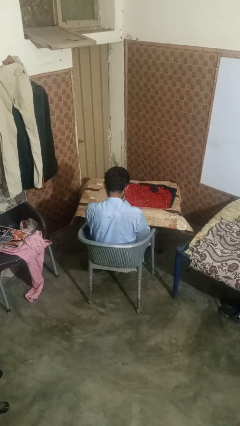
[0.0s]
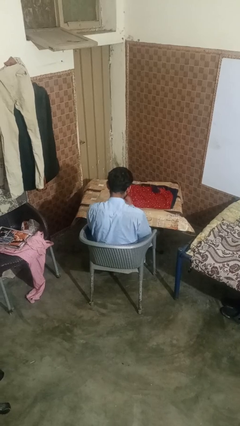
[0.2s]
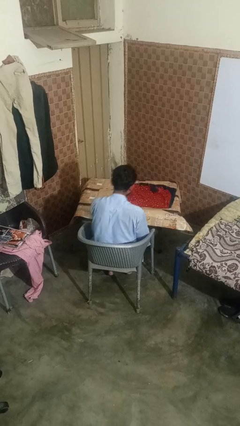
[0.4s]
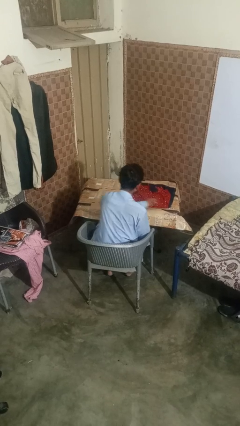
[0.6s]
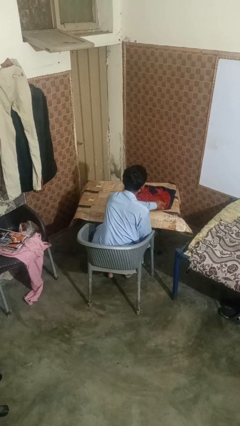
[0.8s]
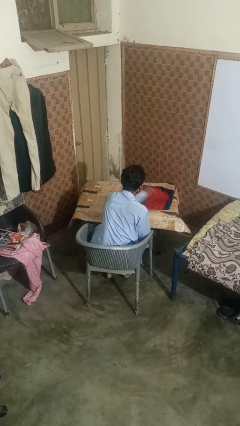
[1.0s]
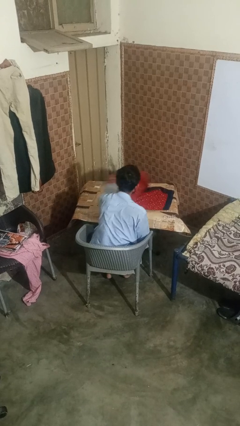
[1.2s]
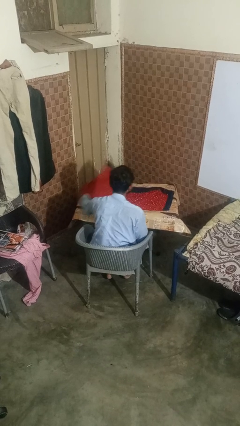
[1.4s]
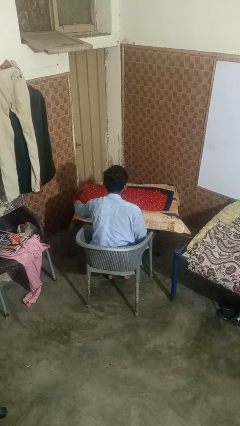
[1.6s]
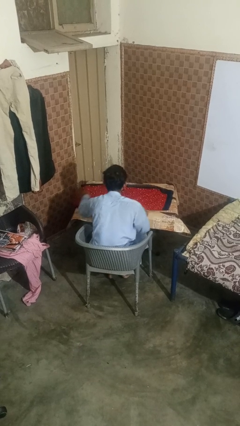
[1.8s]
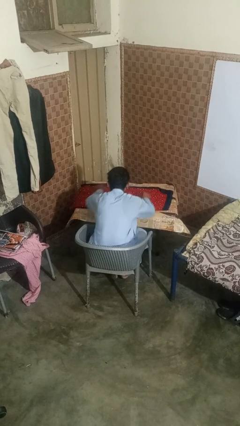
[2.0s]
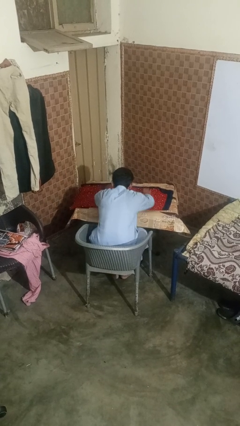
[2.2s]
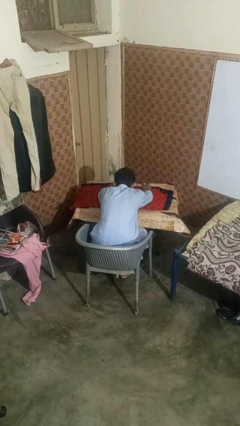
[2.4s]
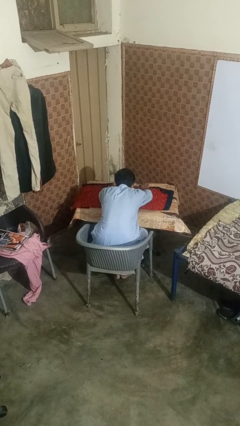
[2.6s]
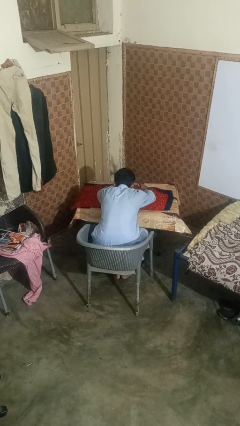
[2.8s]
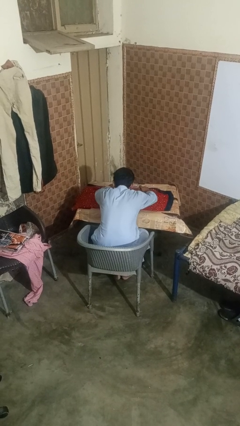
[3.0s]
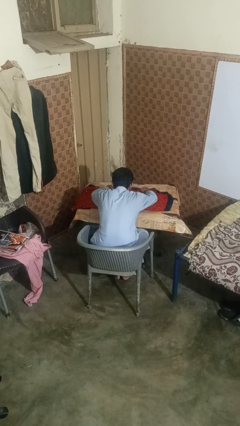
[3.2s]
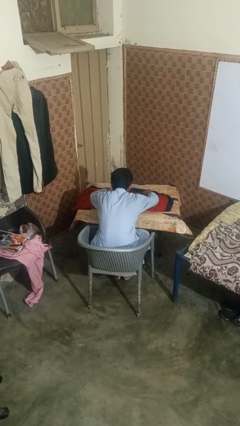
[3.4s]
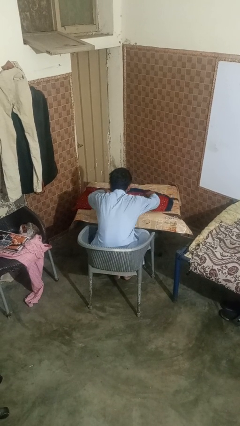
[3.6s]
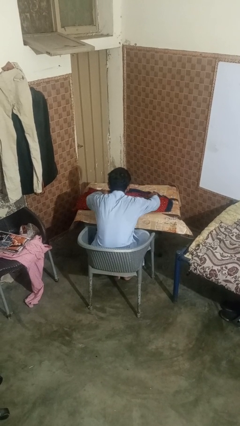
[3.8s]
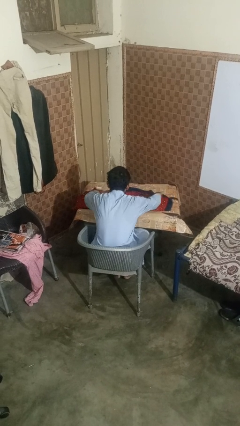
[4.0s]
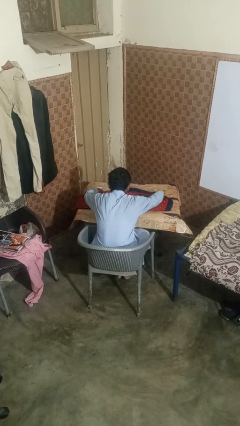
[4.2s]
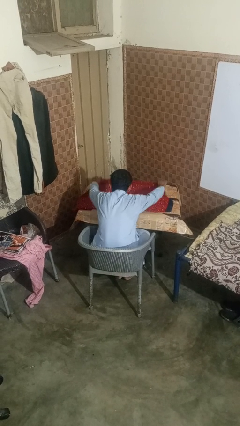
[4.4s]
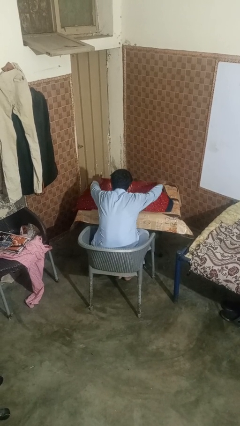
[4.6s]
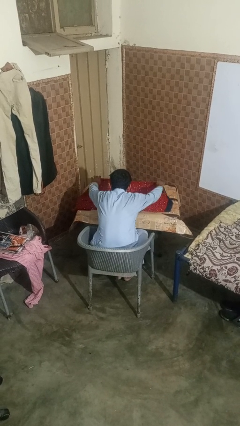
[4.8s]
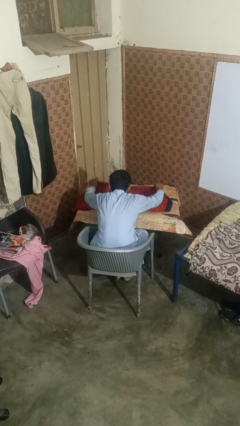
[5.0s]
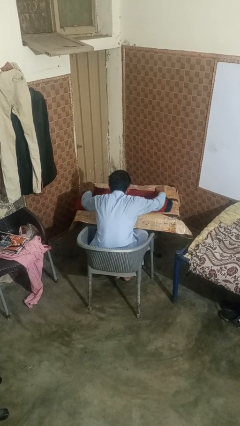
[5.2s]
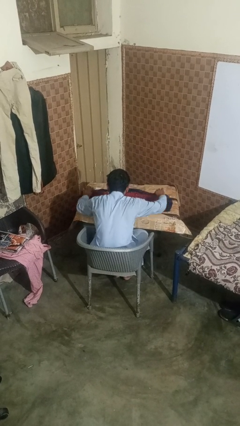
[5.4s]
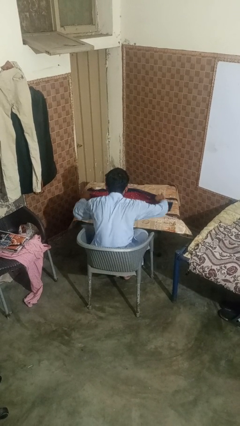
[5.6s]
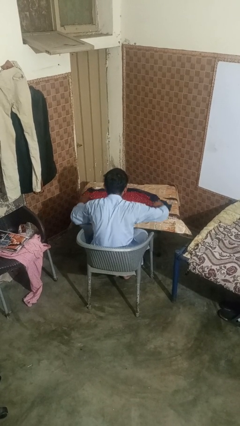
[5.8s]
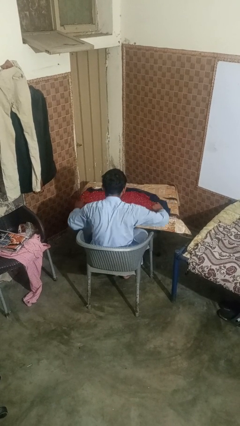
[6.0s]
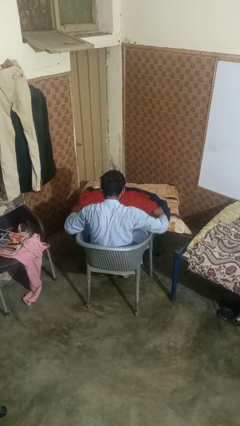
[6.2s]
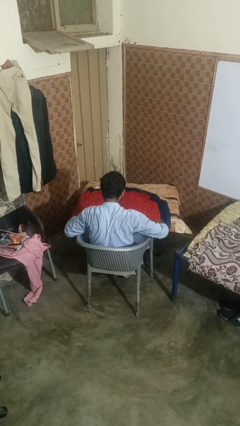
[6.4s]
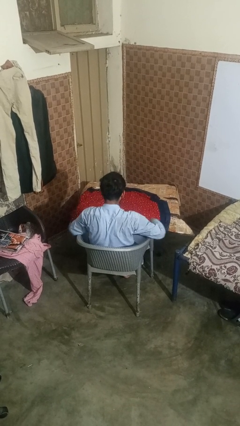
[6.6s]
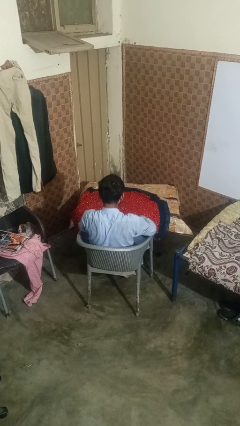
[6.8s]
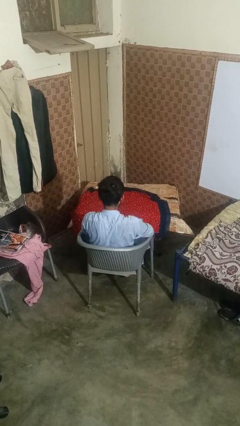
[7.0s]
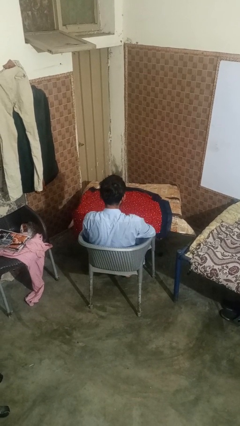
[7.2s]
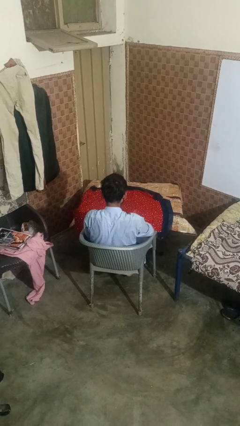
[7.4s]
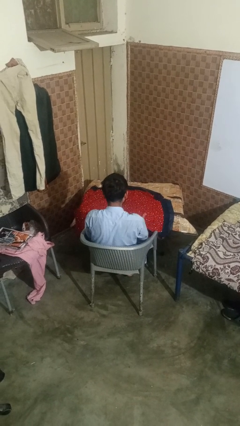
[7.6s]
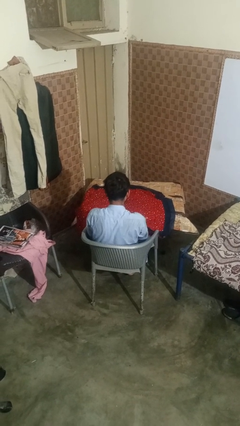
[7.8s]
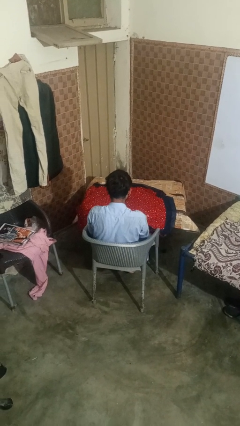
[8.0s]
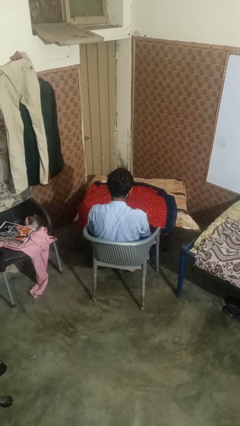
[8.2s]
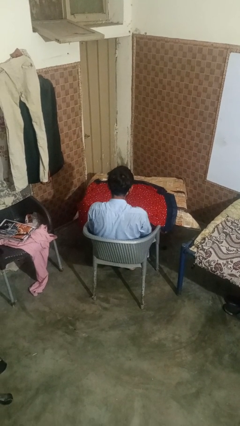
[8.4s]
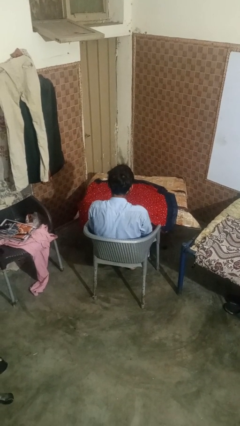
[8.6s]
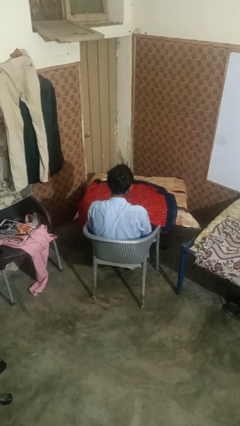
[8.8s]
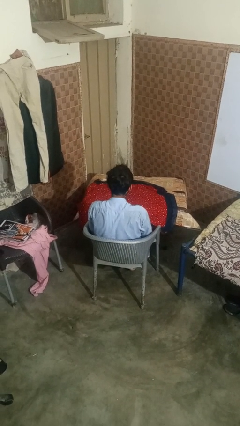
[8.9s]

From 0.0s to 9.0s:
person spreads tablecloth

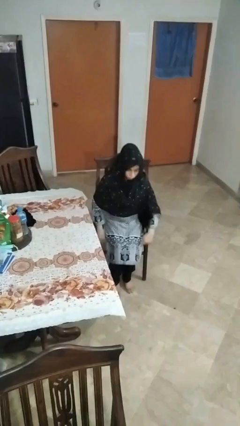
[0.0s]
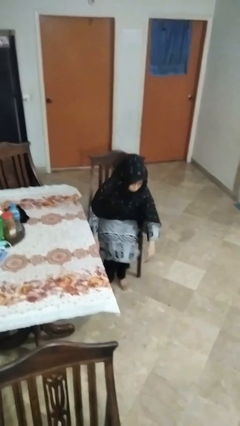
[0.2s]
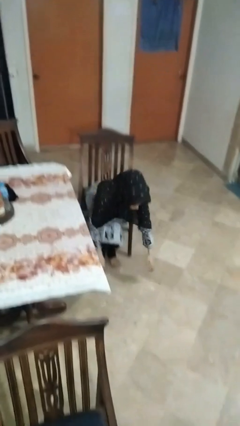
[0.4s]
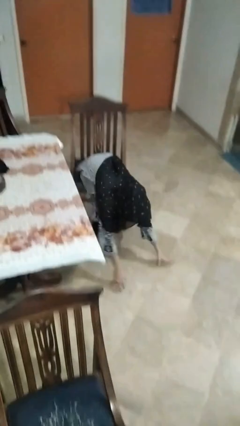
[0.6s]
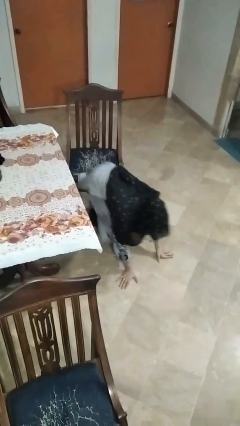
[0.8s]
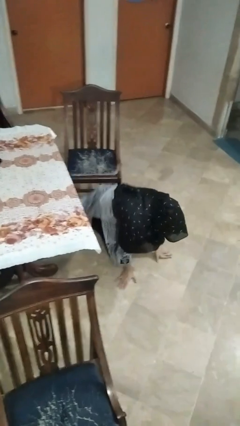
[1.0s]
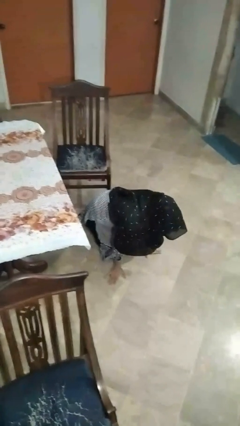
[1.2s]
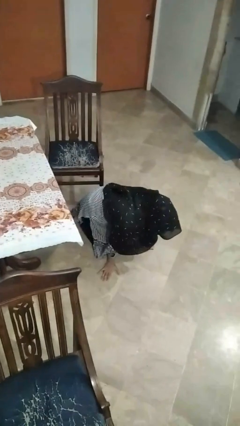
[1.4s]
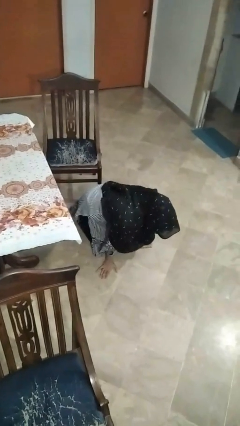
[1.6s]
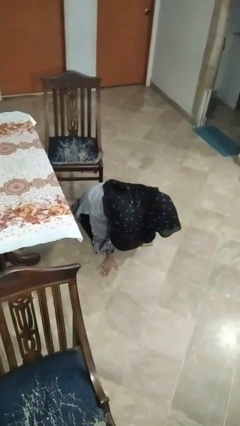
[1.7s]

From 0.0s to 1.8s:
person falls from chair

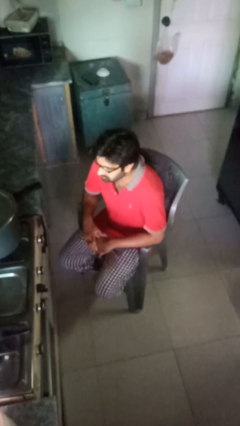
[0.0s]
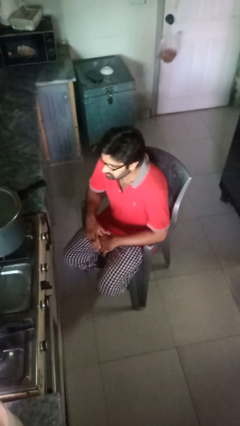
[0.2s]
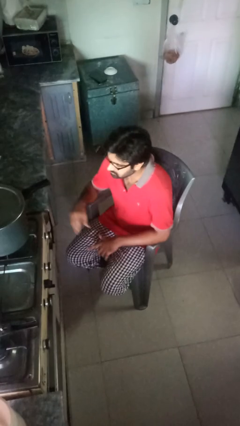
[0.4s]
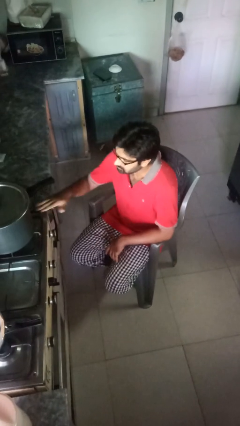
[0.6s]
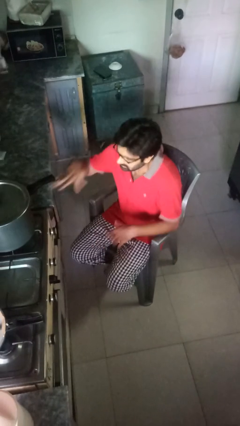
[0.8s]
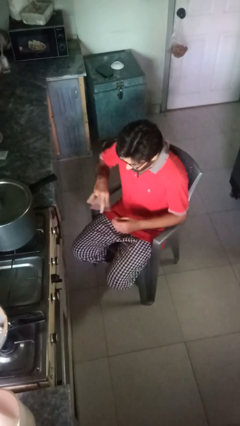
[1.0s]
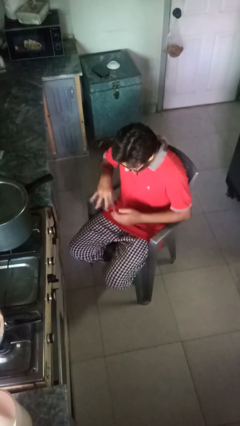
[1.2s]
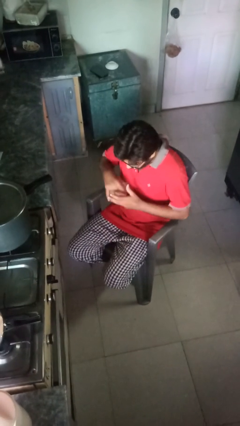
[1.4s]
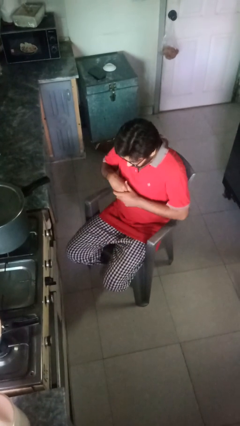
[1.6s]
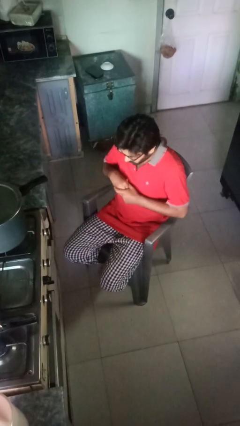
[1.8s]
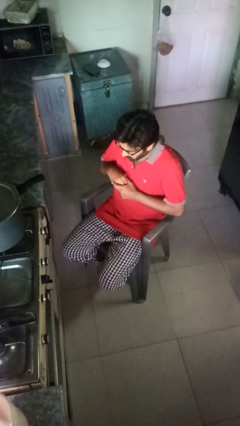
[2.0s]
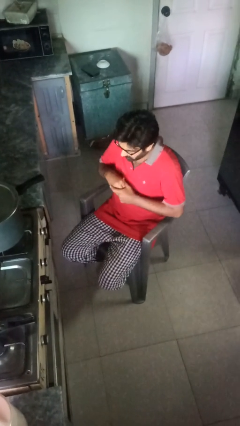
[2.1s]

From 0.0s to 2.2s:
person burns hand

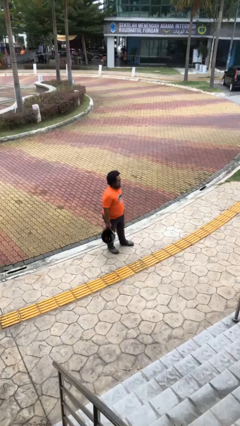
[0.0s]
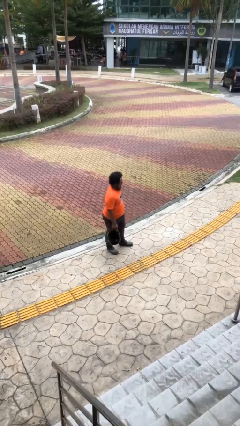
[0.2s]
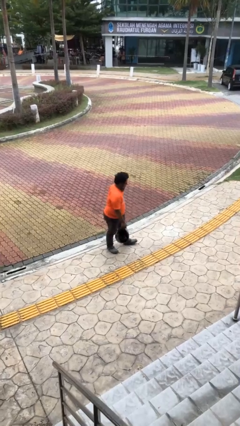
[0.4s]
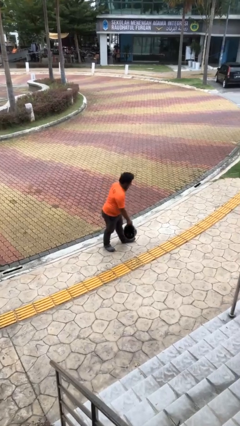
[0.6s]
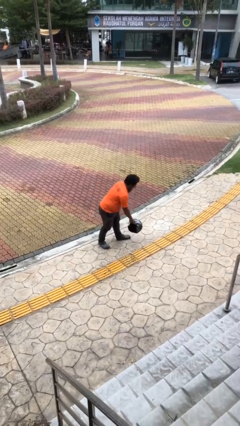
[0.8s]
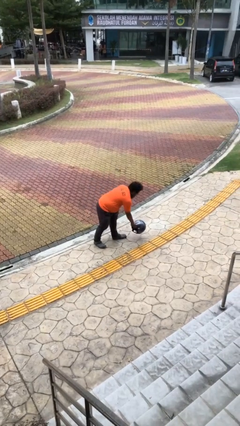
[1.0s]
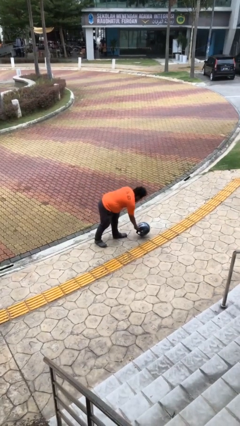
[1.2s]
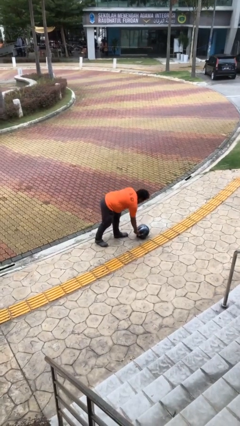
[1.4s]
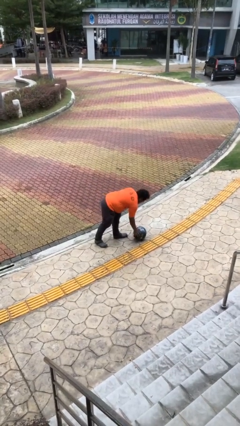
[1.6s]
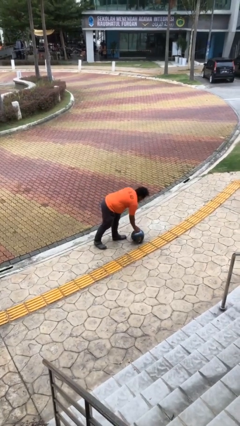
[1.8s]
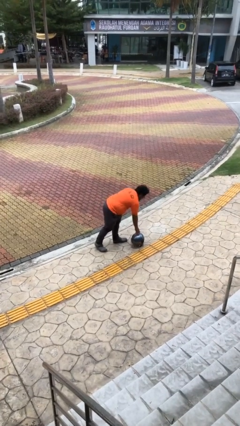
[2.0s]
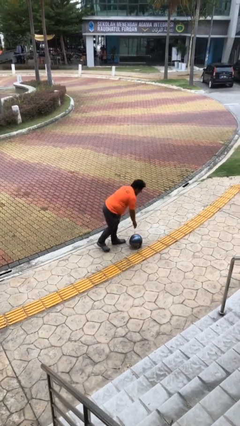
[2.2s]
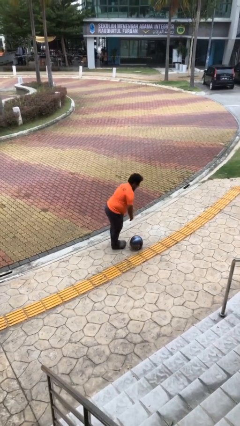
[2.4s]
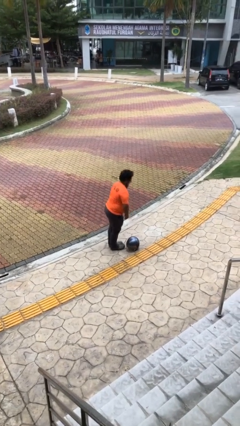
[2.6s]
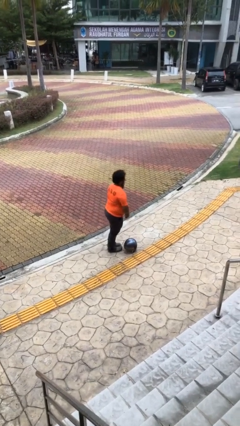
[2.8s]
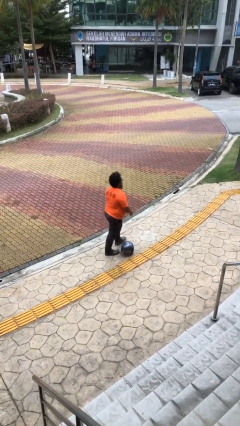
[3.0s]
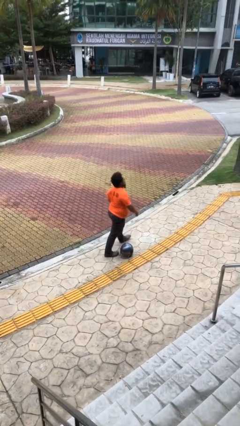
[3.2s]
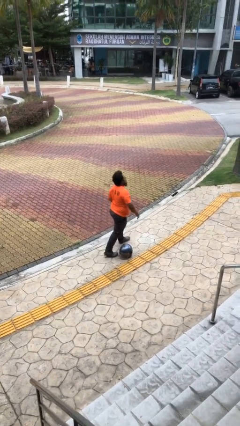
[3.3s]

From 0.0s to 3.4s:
person puts down object on floor

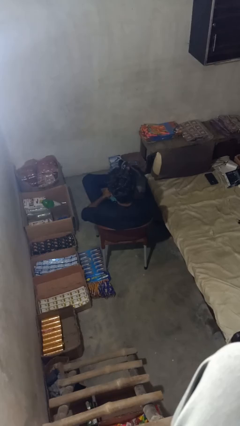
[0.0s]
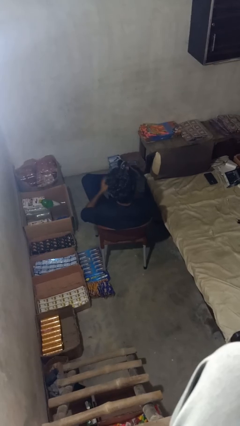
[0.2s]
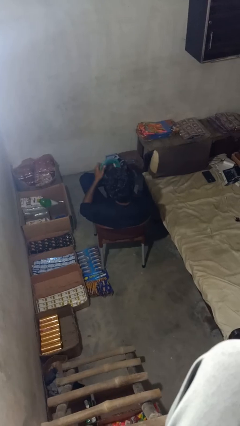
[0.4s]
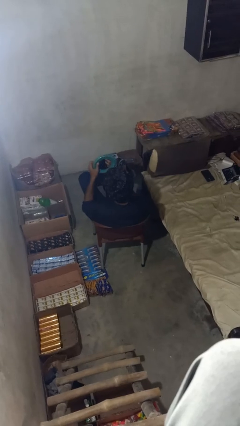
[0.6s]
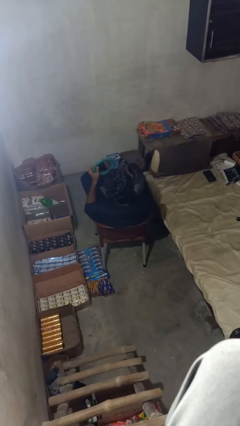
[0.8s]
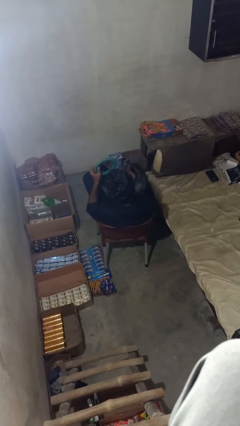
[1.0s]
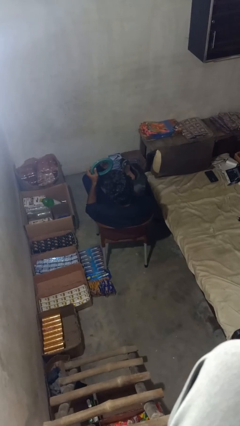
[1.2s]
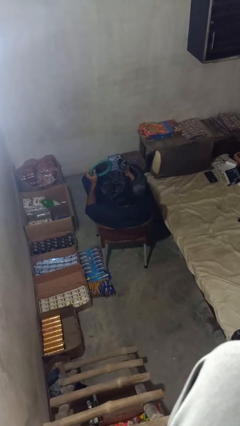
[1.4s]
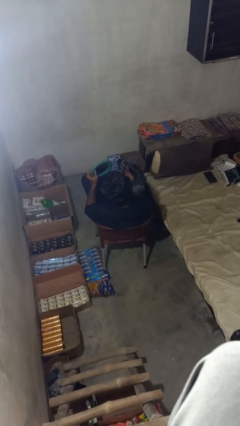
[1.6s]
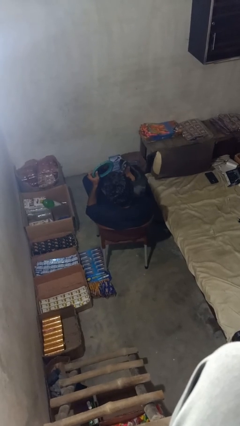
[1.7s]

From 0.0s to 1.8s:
person applies lip makeup
